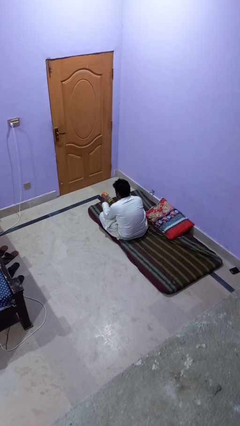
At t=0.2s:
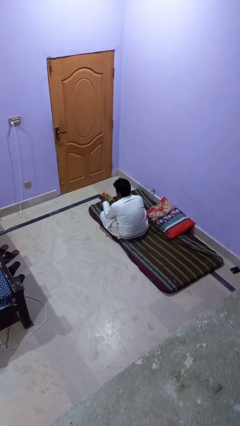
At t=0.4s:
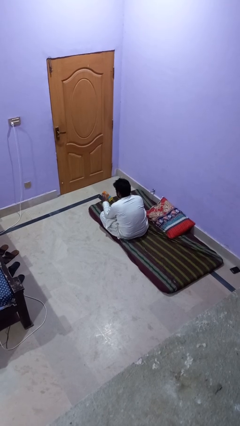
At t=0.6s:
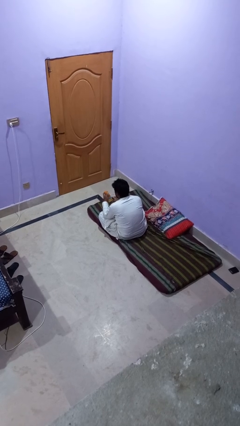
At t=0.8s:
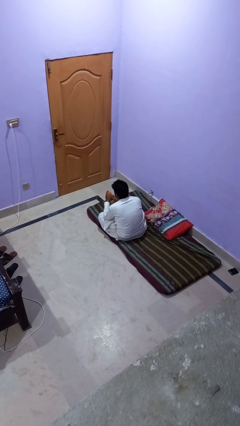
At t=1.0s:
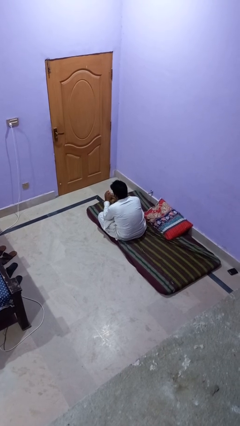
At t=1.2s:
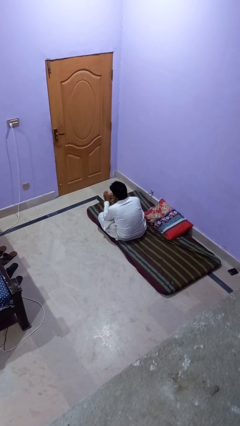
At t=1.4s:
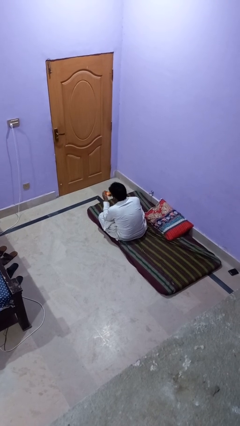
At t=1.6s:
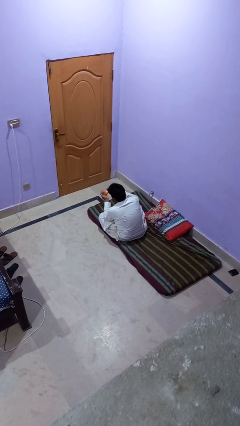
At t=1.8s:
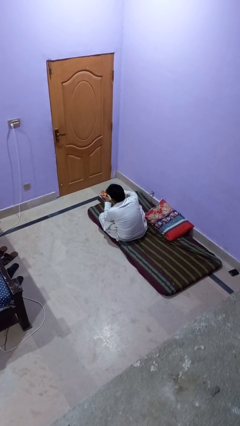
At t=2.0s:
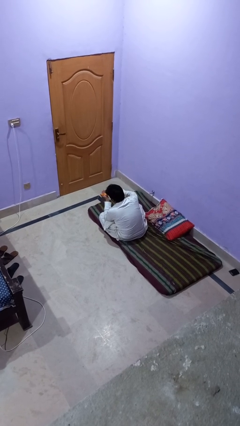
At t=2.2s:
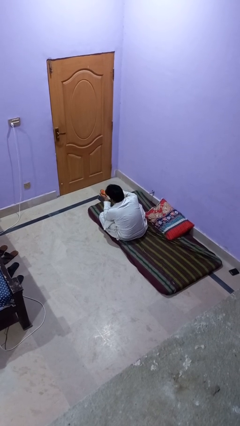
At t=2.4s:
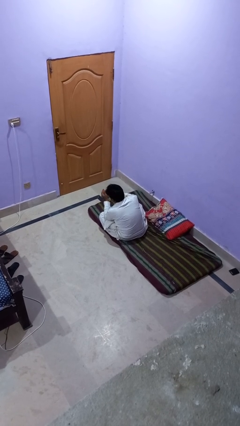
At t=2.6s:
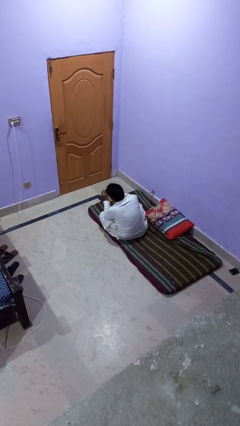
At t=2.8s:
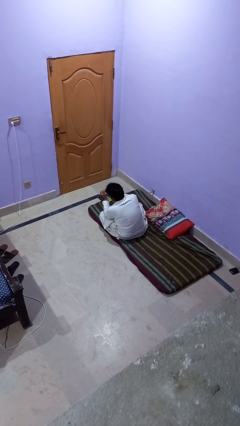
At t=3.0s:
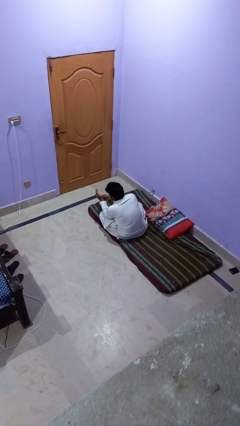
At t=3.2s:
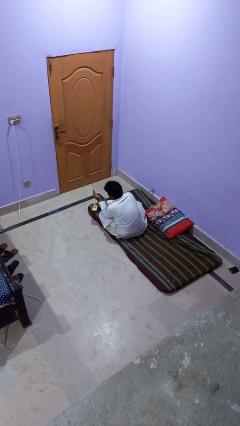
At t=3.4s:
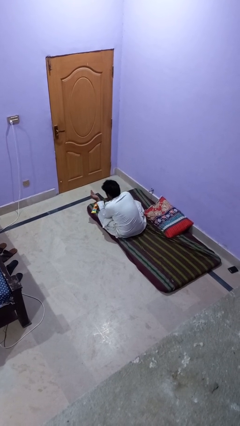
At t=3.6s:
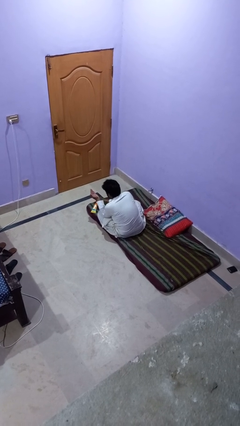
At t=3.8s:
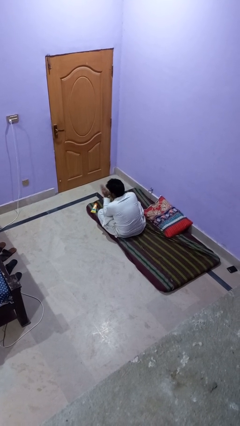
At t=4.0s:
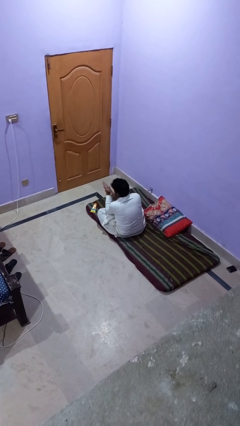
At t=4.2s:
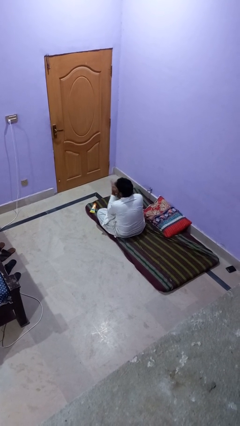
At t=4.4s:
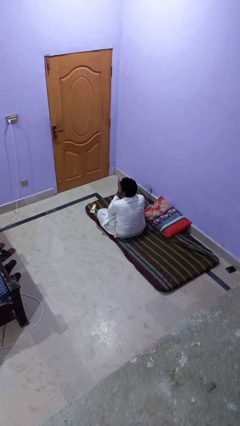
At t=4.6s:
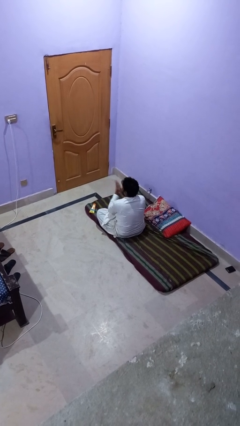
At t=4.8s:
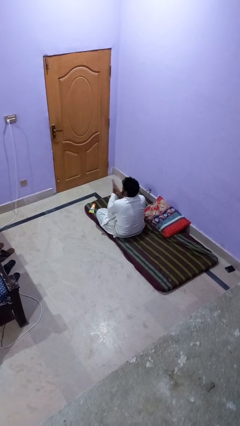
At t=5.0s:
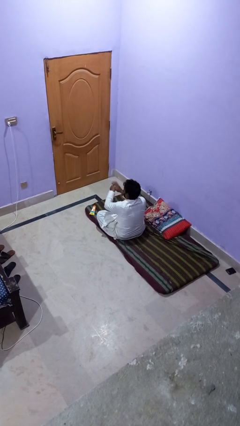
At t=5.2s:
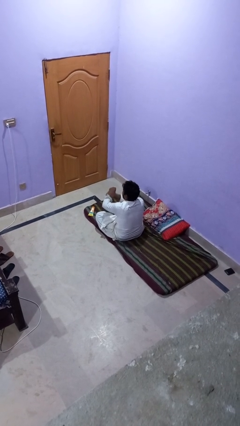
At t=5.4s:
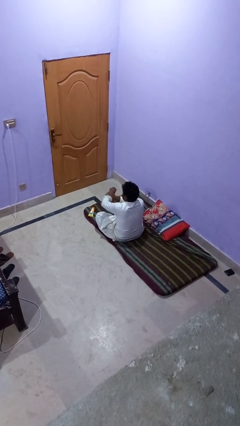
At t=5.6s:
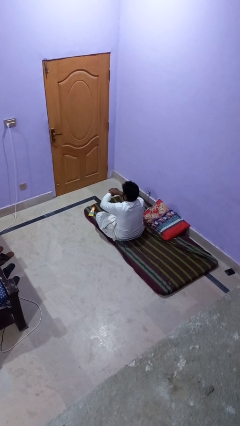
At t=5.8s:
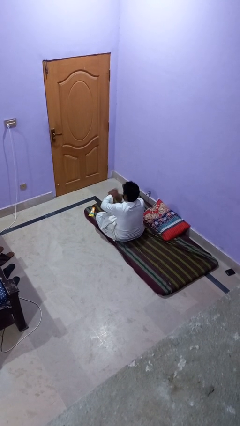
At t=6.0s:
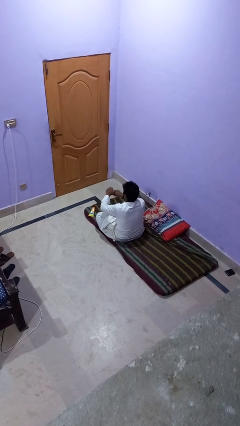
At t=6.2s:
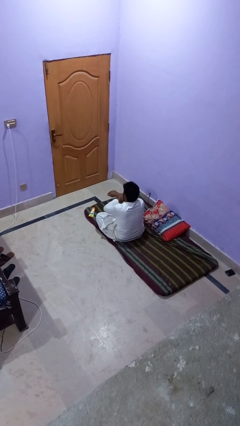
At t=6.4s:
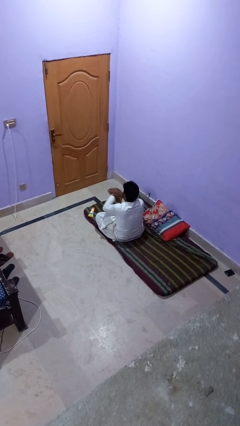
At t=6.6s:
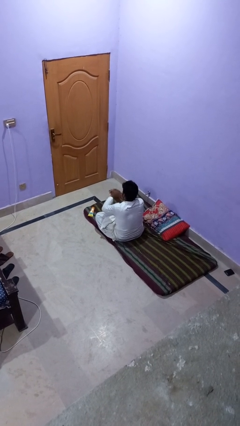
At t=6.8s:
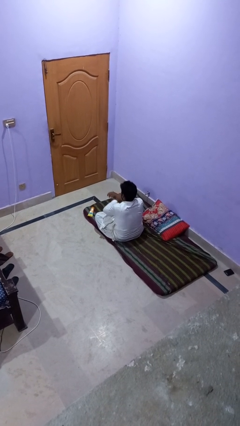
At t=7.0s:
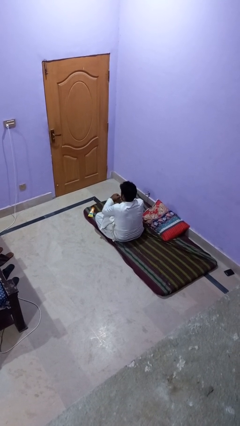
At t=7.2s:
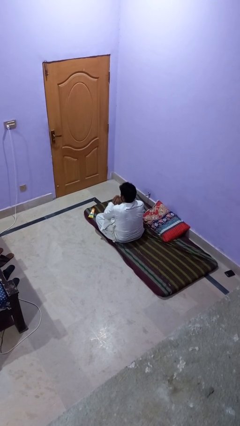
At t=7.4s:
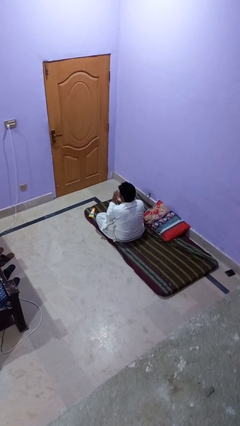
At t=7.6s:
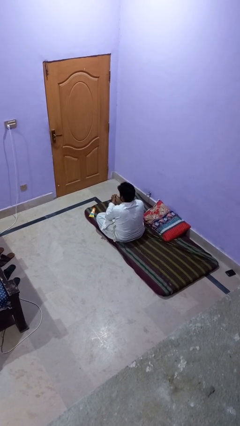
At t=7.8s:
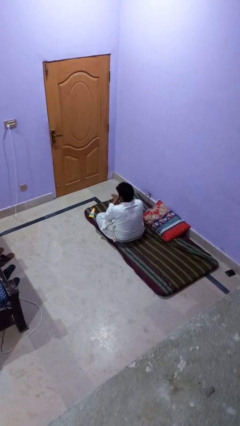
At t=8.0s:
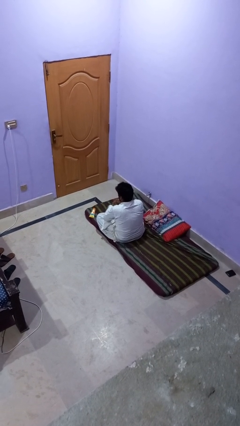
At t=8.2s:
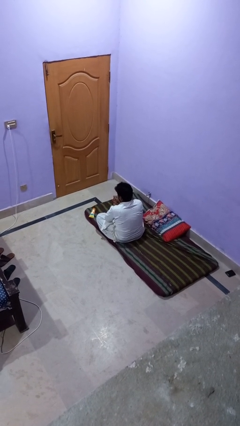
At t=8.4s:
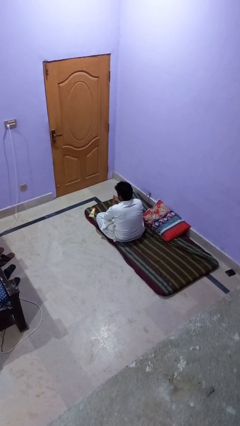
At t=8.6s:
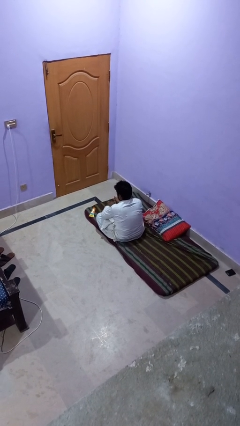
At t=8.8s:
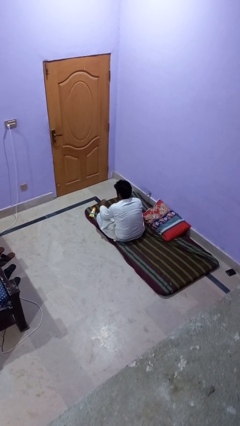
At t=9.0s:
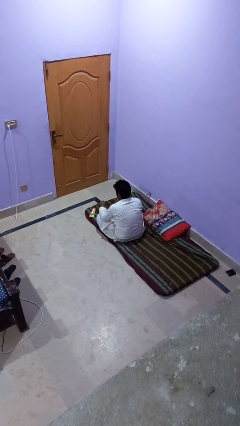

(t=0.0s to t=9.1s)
person applies sunscreen

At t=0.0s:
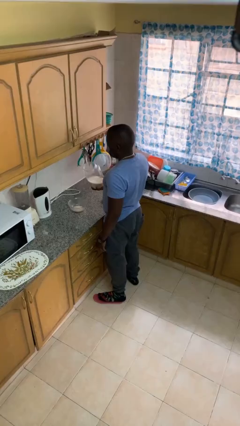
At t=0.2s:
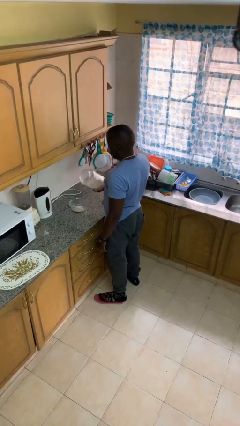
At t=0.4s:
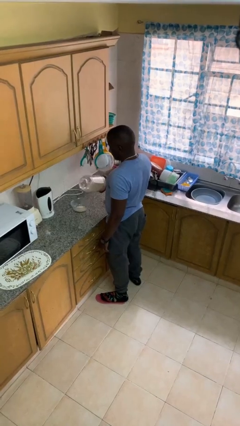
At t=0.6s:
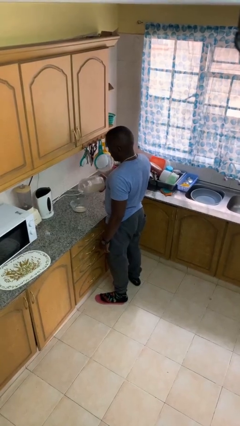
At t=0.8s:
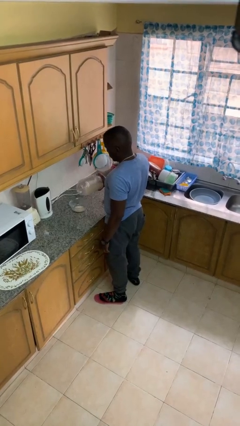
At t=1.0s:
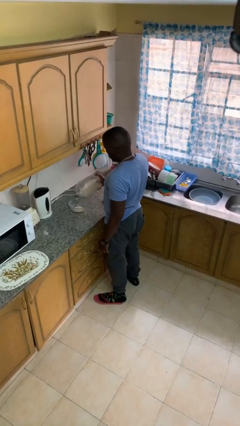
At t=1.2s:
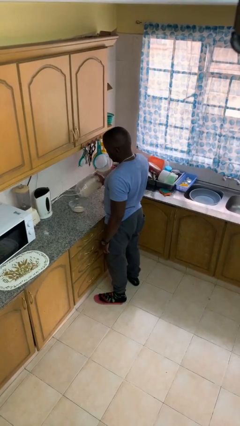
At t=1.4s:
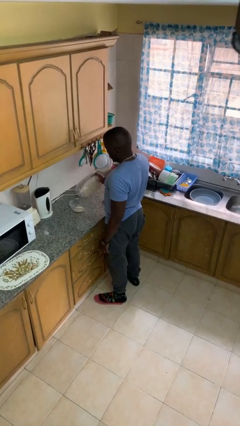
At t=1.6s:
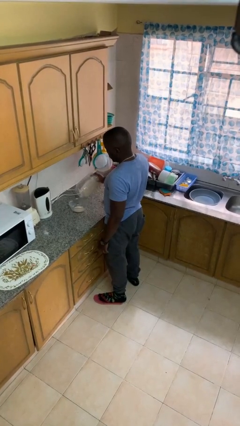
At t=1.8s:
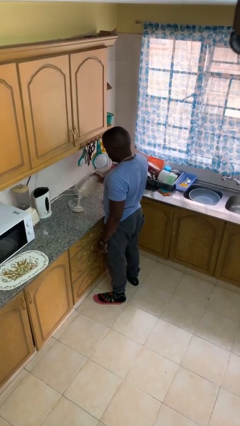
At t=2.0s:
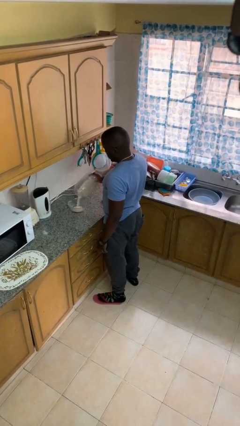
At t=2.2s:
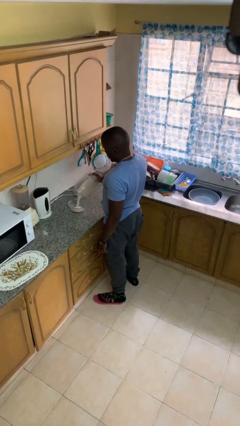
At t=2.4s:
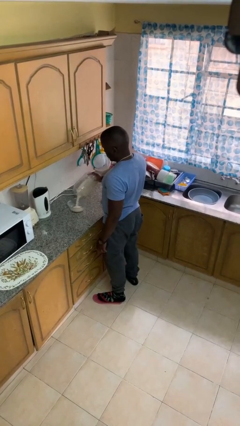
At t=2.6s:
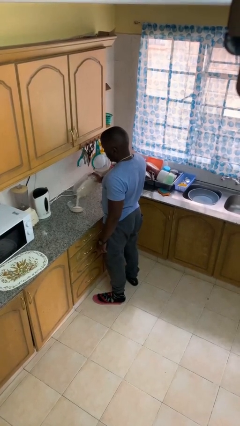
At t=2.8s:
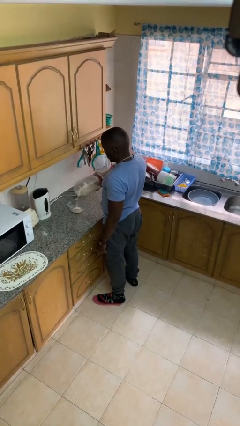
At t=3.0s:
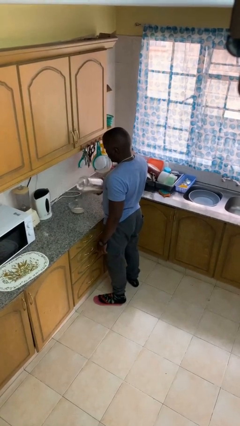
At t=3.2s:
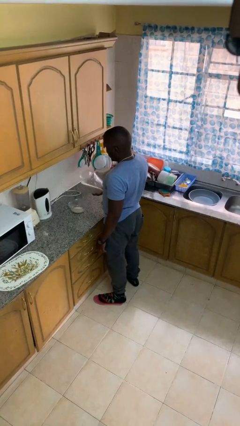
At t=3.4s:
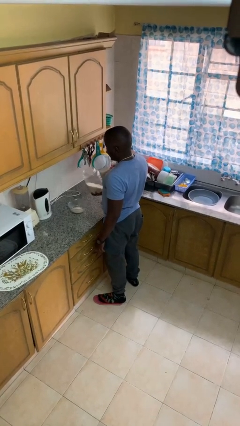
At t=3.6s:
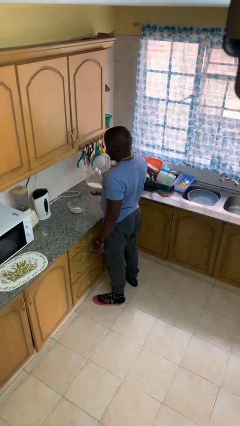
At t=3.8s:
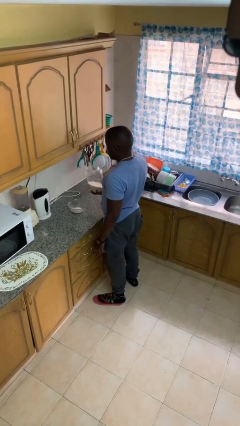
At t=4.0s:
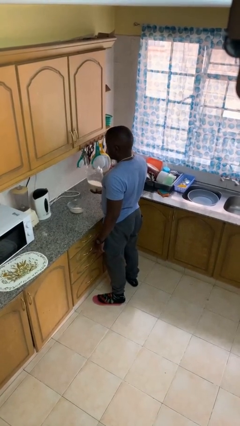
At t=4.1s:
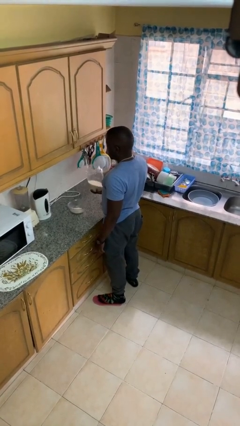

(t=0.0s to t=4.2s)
person pours into bowl

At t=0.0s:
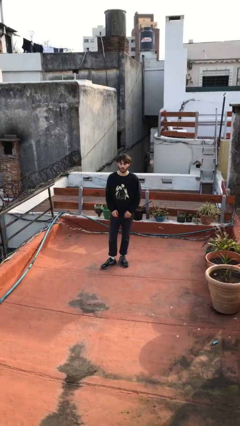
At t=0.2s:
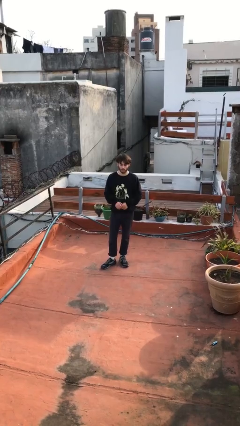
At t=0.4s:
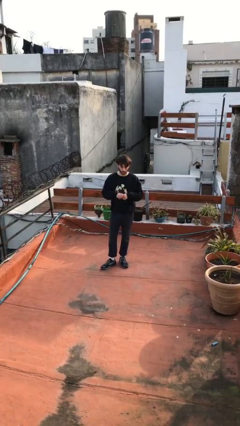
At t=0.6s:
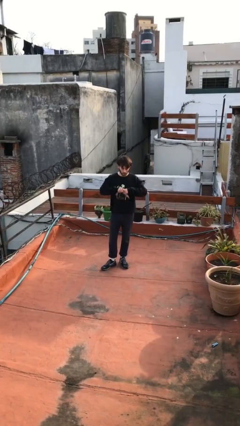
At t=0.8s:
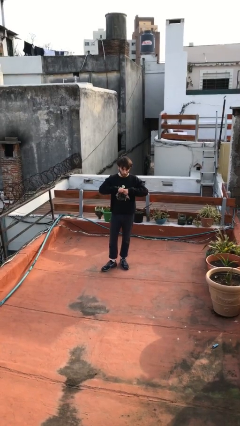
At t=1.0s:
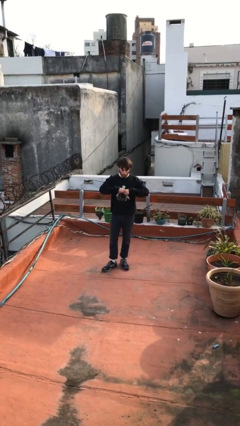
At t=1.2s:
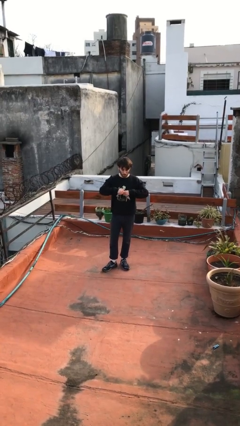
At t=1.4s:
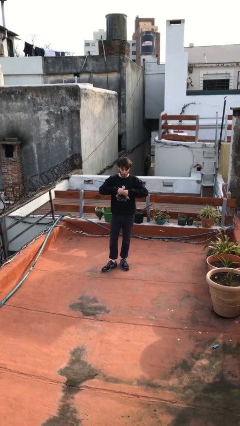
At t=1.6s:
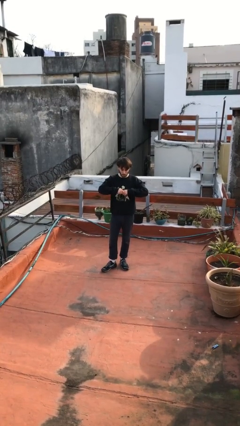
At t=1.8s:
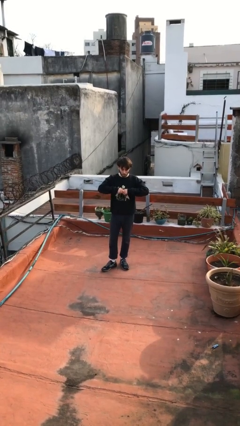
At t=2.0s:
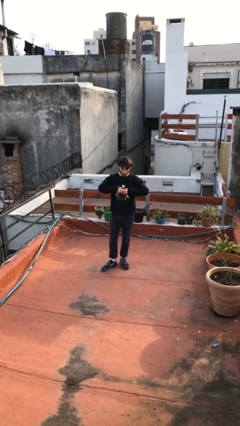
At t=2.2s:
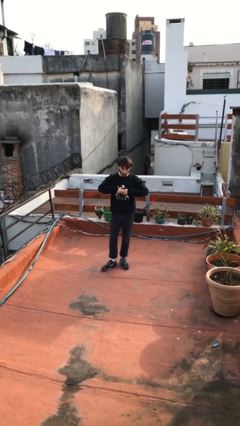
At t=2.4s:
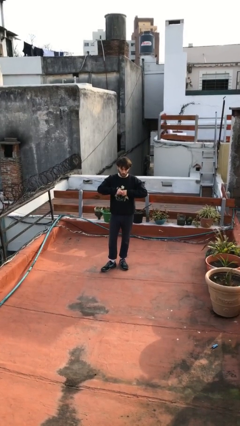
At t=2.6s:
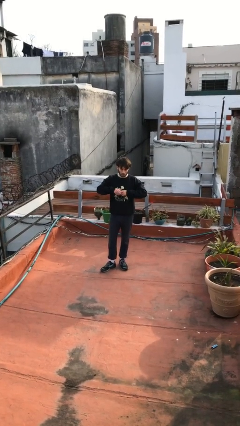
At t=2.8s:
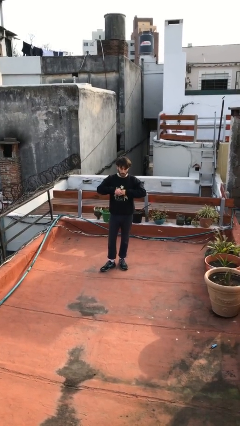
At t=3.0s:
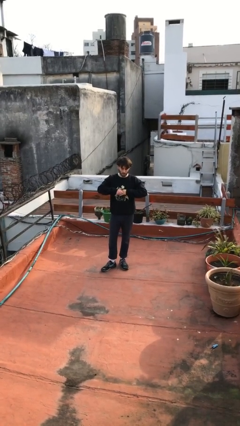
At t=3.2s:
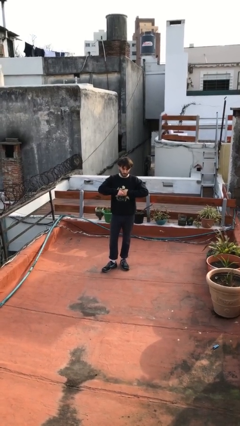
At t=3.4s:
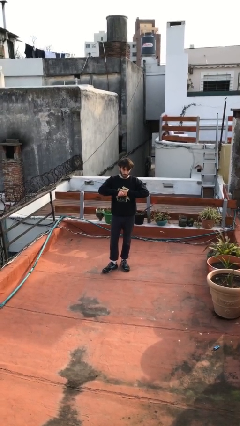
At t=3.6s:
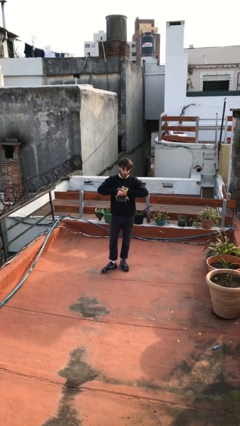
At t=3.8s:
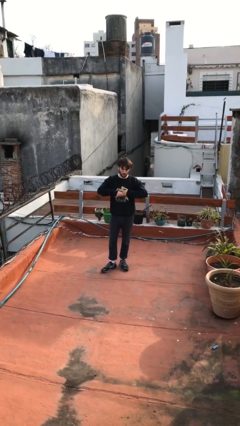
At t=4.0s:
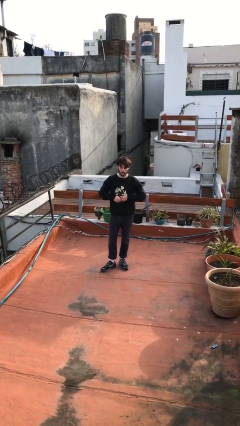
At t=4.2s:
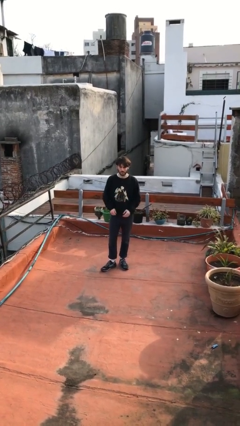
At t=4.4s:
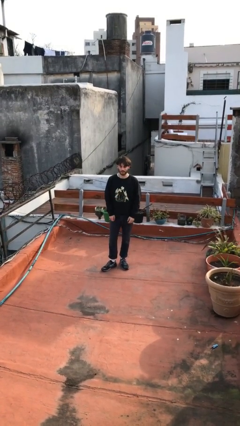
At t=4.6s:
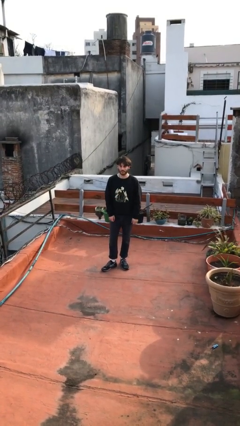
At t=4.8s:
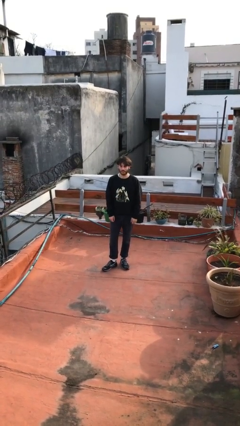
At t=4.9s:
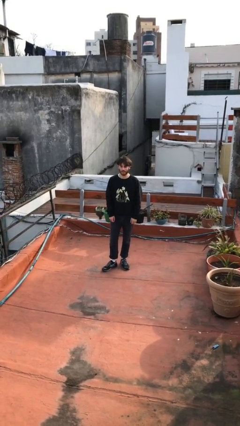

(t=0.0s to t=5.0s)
person cracks knuckles
